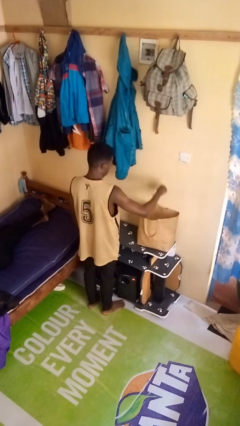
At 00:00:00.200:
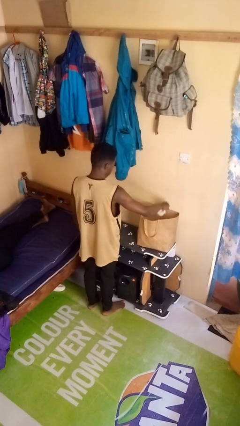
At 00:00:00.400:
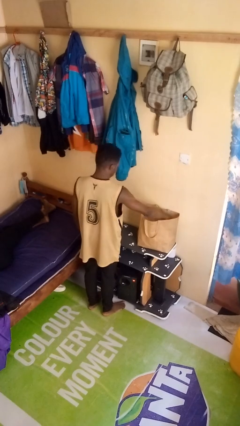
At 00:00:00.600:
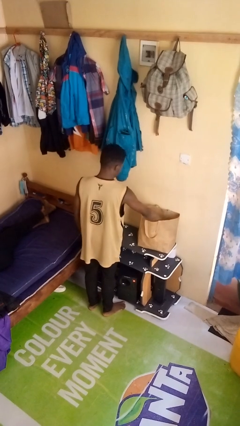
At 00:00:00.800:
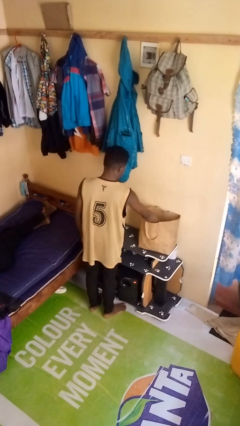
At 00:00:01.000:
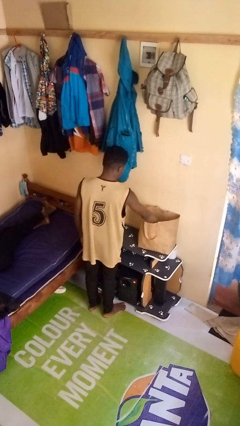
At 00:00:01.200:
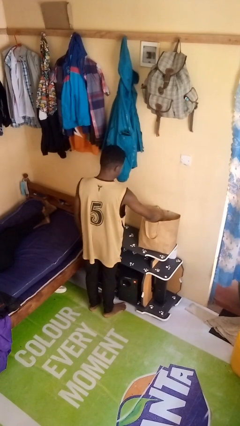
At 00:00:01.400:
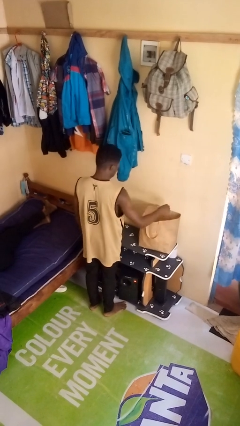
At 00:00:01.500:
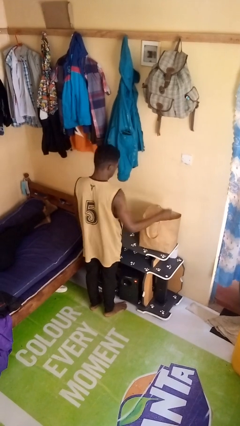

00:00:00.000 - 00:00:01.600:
person puts object into bag

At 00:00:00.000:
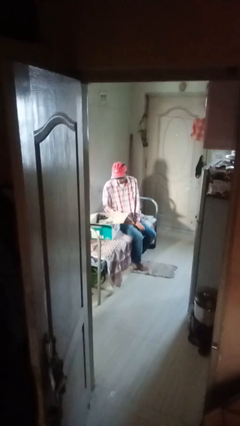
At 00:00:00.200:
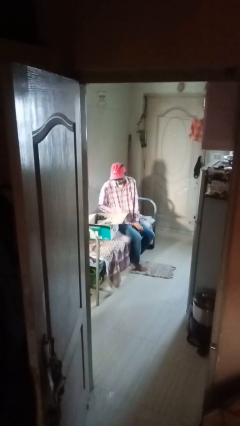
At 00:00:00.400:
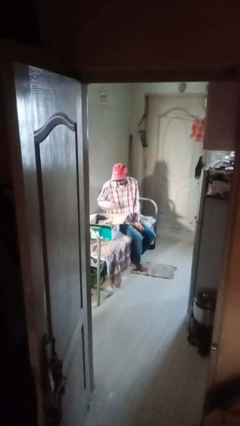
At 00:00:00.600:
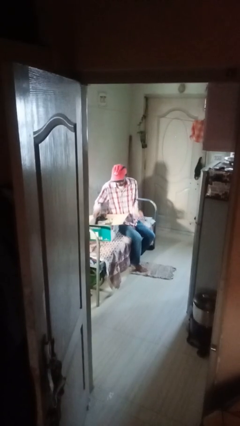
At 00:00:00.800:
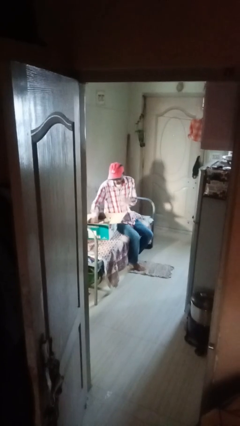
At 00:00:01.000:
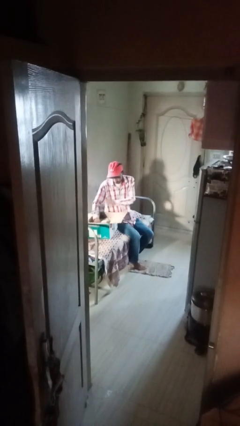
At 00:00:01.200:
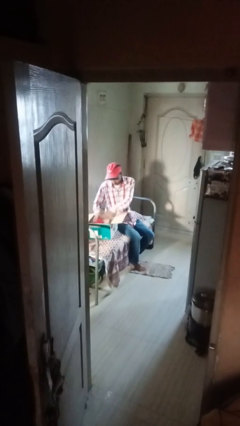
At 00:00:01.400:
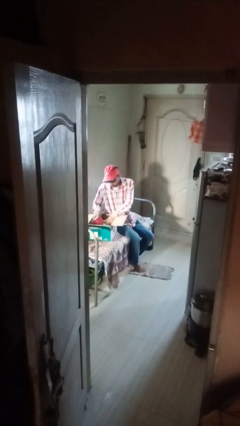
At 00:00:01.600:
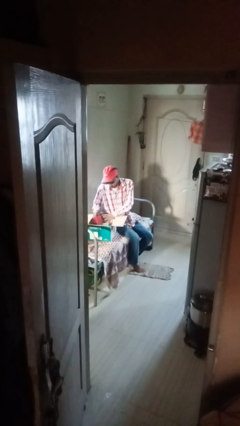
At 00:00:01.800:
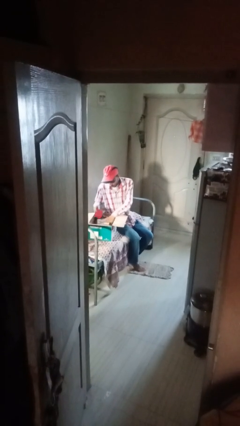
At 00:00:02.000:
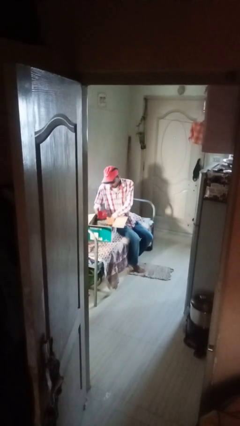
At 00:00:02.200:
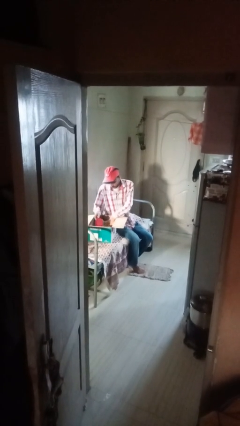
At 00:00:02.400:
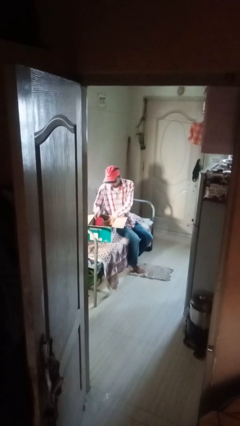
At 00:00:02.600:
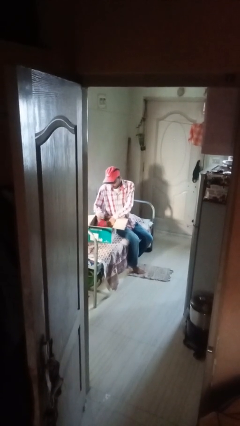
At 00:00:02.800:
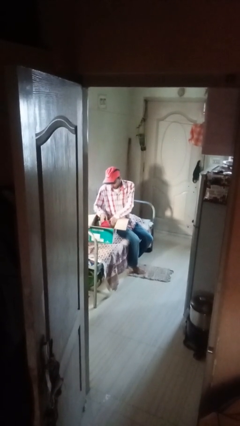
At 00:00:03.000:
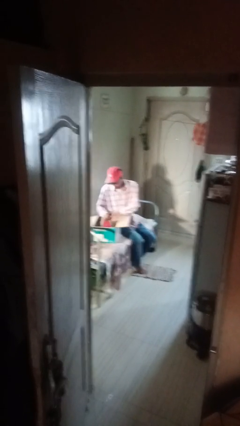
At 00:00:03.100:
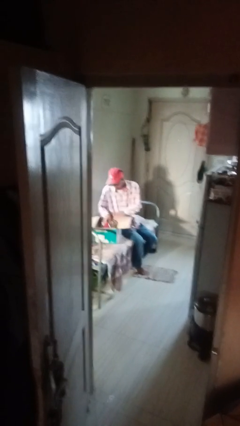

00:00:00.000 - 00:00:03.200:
person searches in box

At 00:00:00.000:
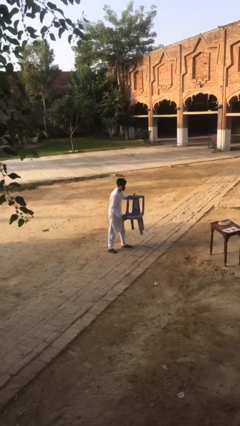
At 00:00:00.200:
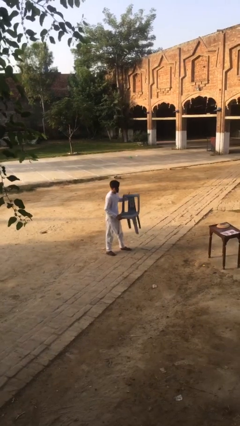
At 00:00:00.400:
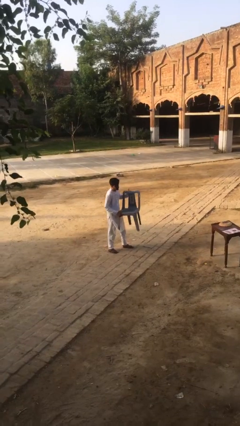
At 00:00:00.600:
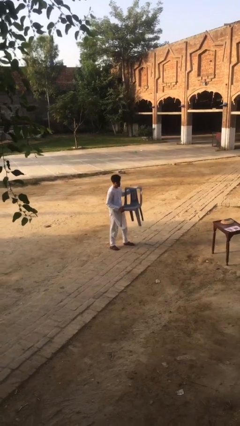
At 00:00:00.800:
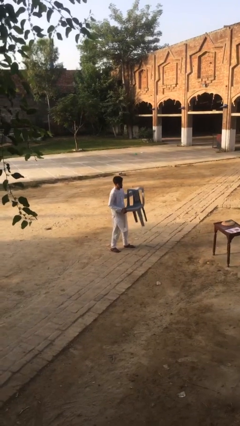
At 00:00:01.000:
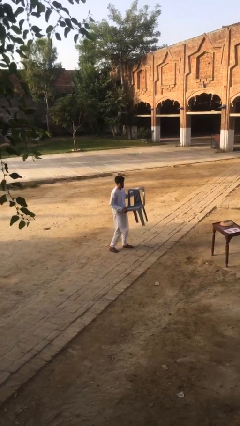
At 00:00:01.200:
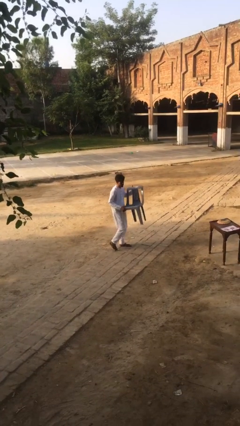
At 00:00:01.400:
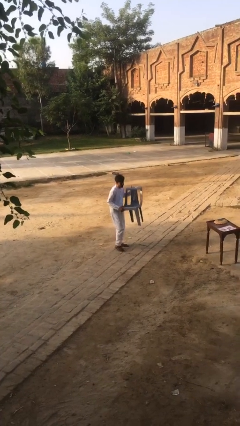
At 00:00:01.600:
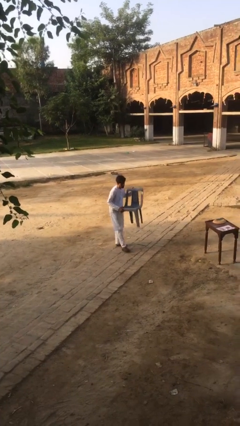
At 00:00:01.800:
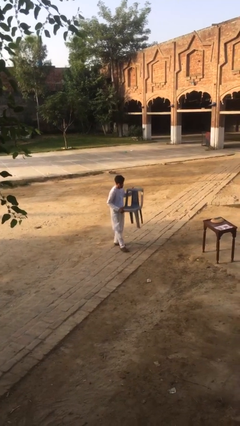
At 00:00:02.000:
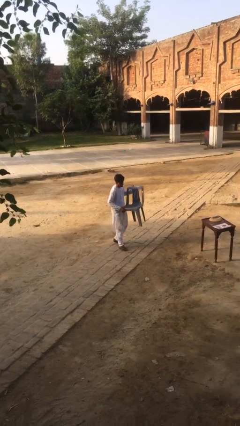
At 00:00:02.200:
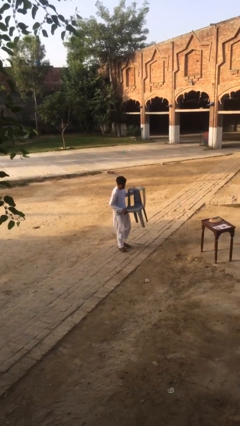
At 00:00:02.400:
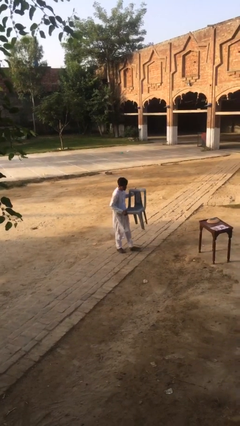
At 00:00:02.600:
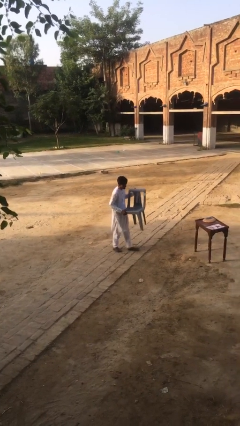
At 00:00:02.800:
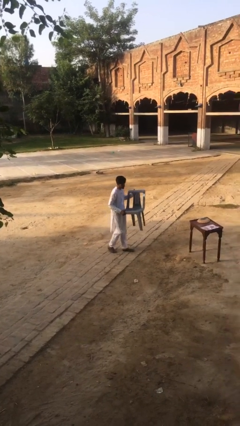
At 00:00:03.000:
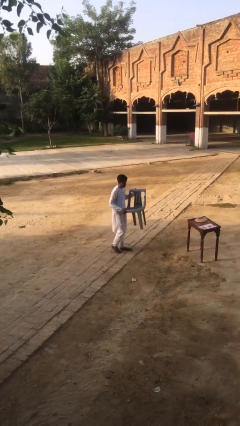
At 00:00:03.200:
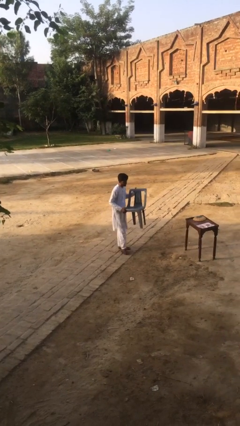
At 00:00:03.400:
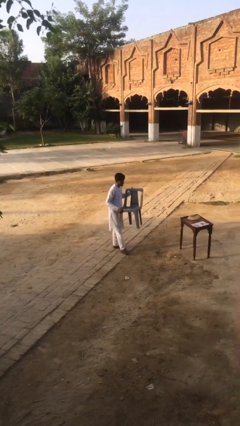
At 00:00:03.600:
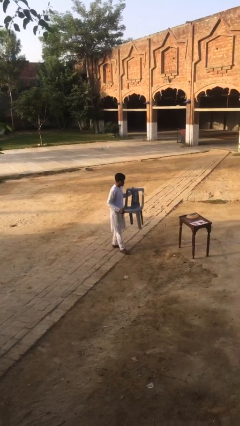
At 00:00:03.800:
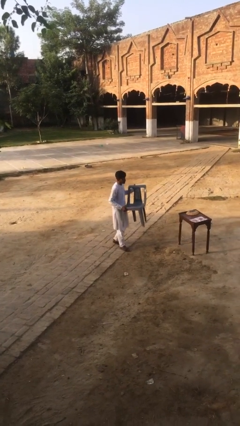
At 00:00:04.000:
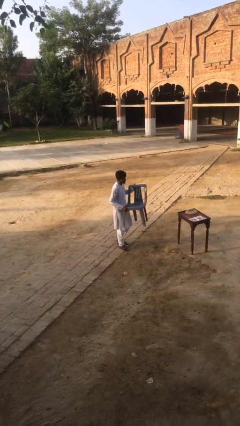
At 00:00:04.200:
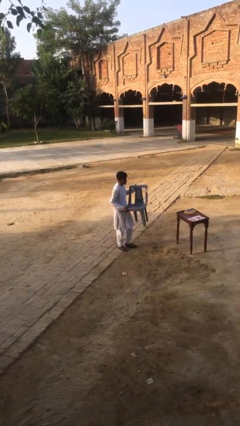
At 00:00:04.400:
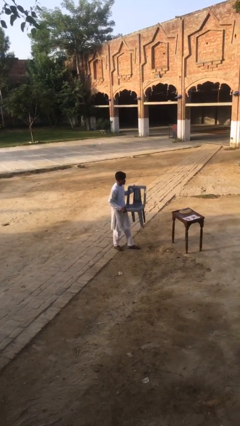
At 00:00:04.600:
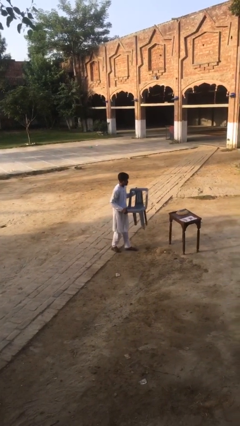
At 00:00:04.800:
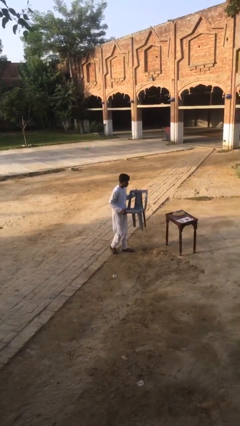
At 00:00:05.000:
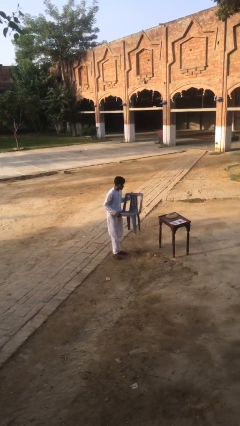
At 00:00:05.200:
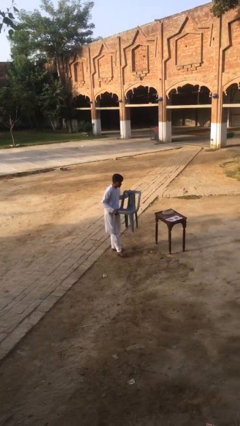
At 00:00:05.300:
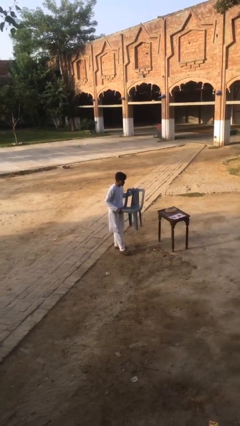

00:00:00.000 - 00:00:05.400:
person carries heavy object

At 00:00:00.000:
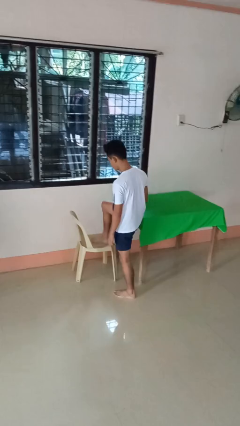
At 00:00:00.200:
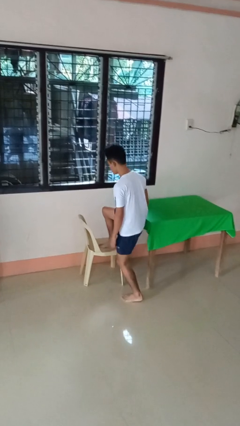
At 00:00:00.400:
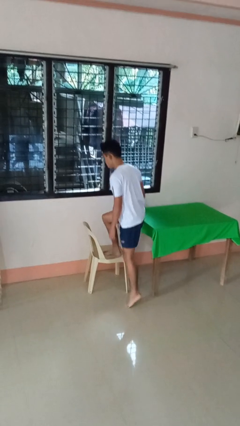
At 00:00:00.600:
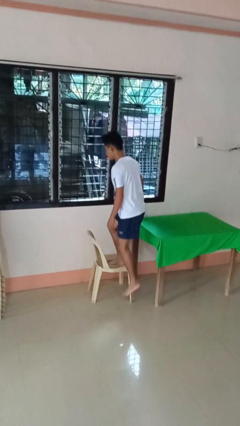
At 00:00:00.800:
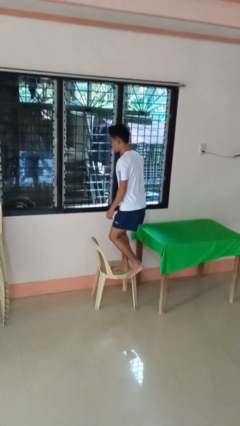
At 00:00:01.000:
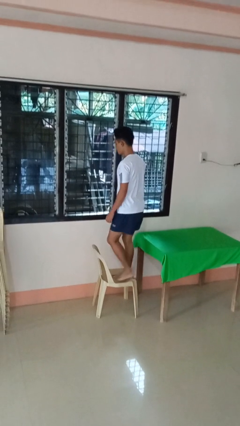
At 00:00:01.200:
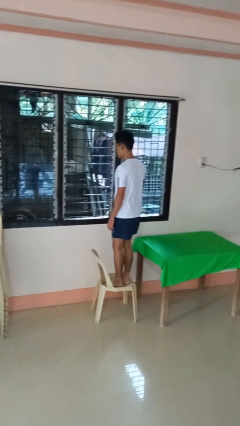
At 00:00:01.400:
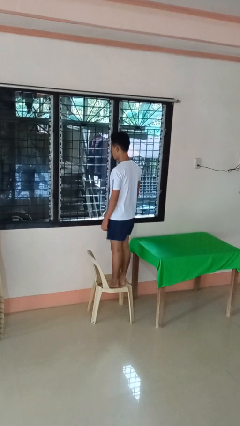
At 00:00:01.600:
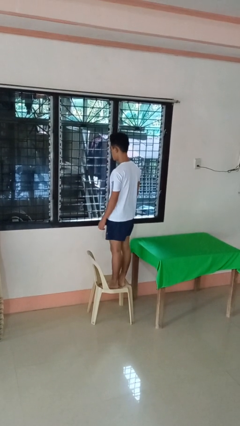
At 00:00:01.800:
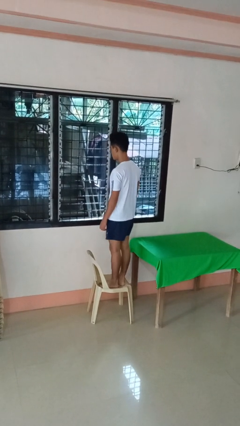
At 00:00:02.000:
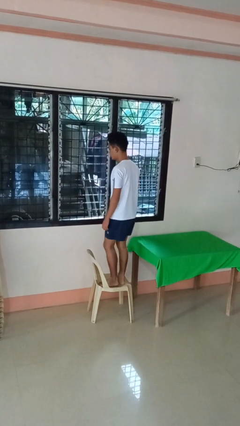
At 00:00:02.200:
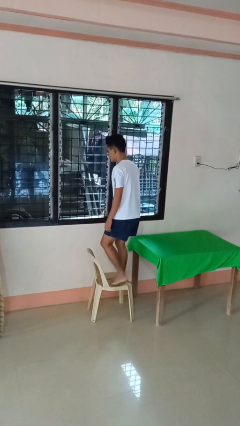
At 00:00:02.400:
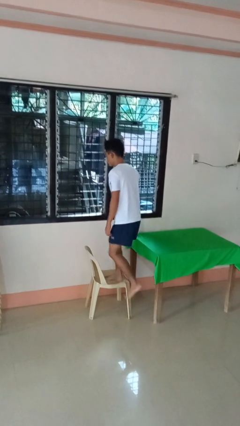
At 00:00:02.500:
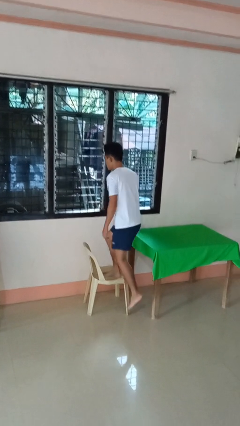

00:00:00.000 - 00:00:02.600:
person climbs on chair

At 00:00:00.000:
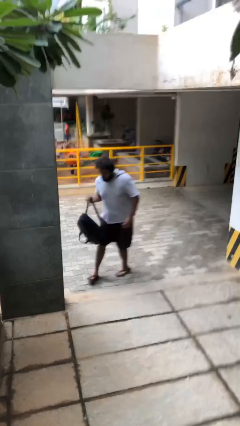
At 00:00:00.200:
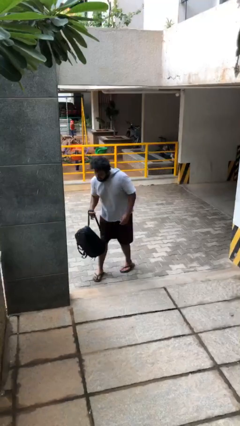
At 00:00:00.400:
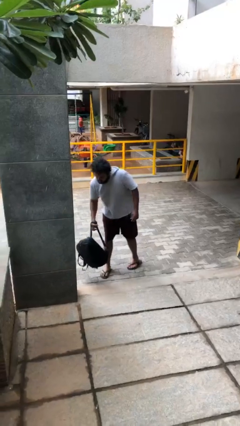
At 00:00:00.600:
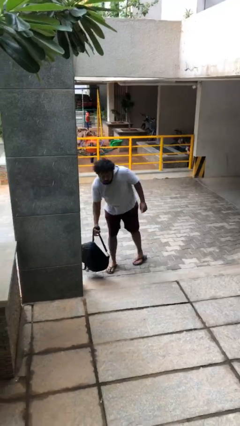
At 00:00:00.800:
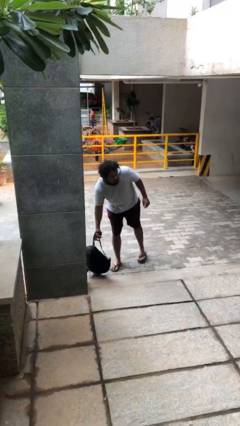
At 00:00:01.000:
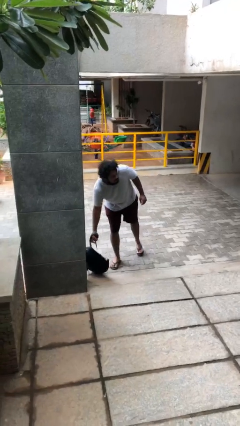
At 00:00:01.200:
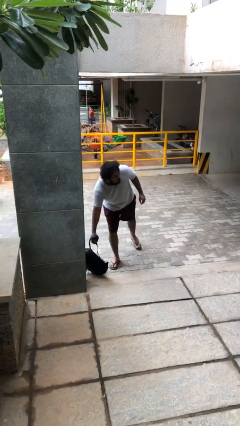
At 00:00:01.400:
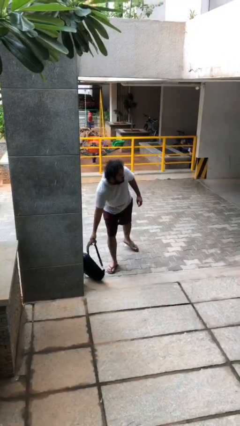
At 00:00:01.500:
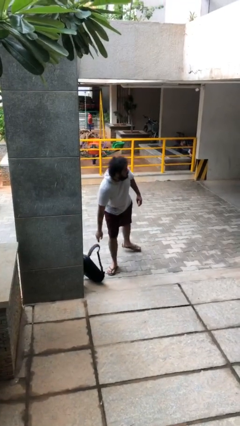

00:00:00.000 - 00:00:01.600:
person puts down object on floor

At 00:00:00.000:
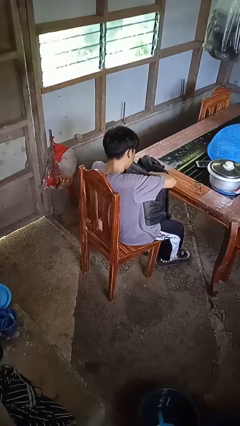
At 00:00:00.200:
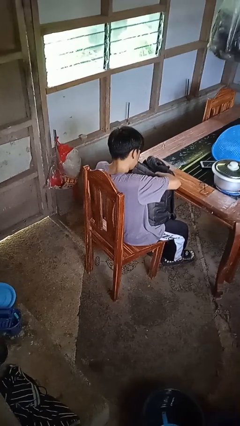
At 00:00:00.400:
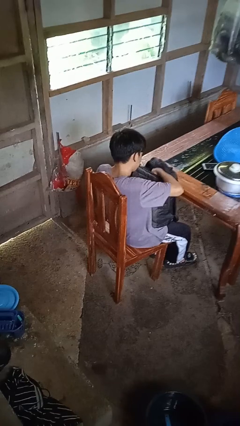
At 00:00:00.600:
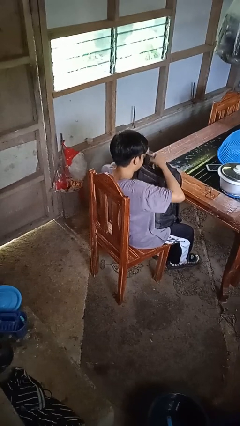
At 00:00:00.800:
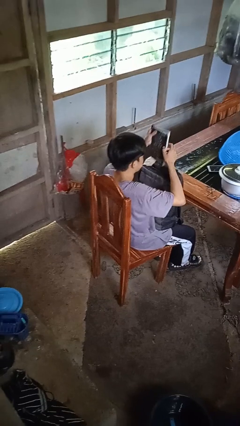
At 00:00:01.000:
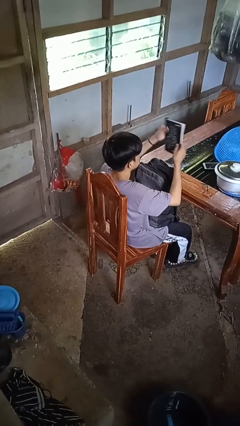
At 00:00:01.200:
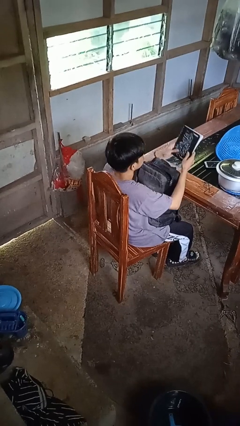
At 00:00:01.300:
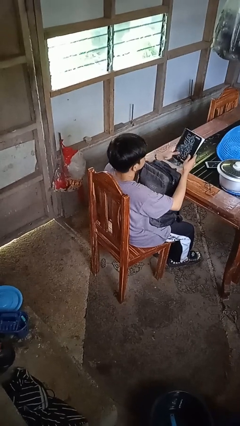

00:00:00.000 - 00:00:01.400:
person takes object from backpack

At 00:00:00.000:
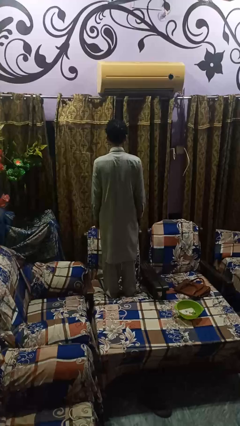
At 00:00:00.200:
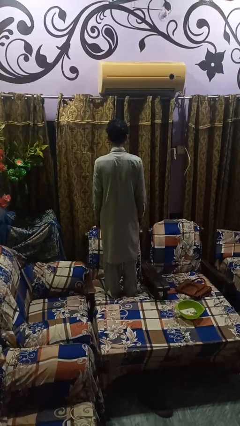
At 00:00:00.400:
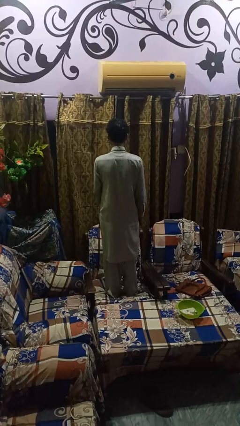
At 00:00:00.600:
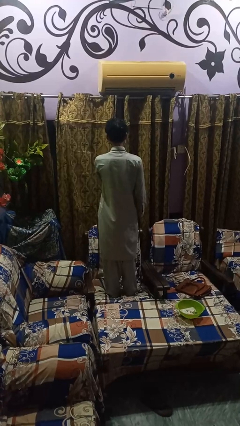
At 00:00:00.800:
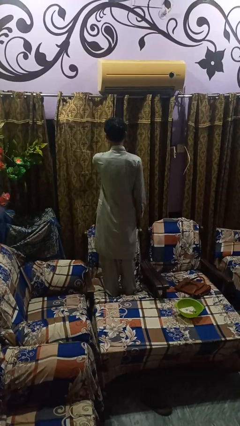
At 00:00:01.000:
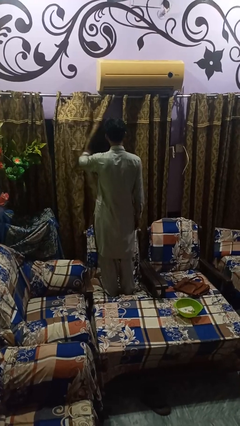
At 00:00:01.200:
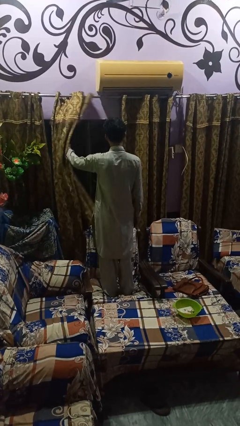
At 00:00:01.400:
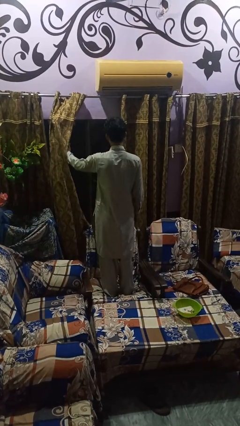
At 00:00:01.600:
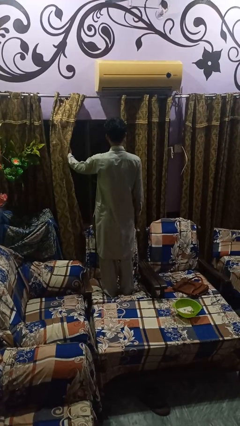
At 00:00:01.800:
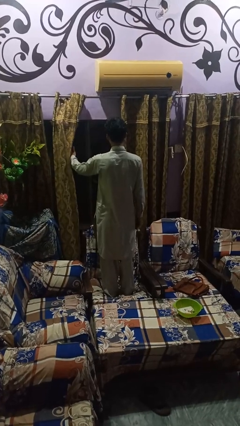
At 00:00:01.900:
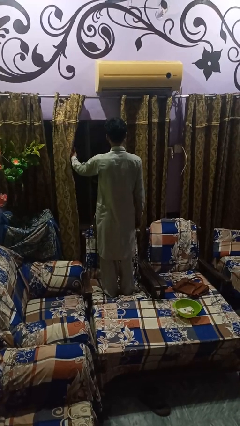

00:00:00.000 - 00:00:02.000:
person opens curtains
